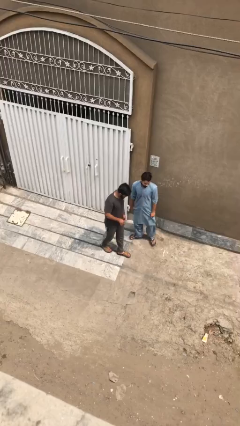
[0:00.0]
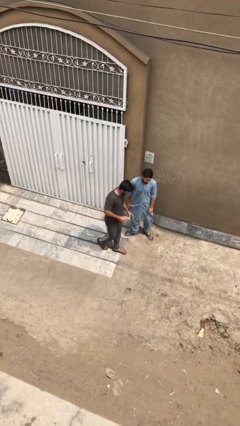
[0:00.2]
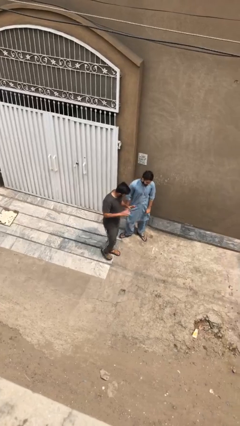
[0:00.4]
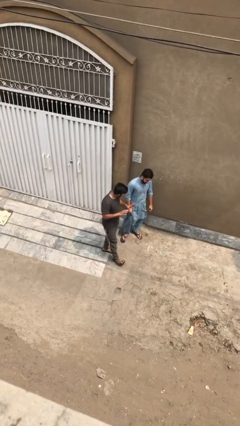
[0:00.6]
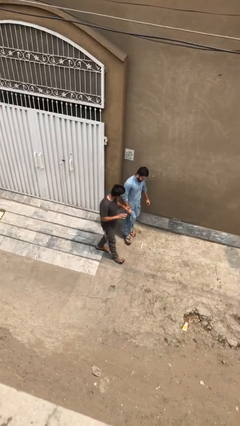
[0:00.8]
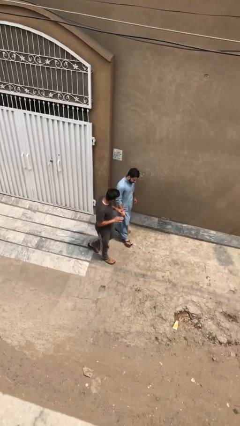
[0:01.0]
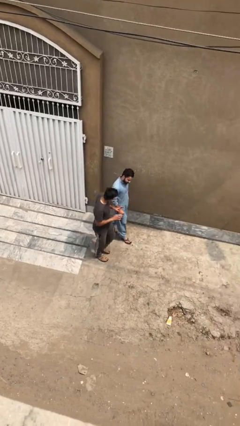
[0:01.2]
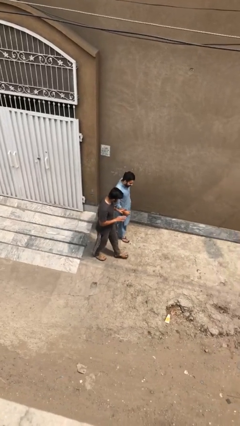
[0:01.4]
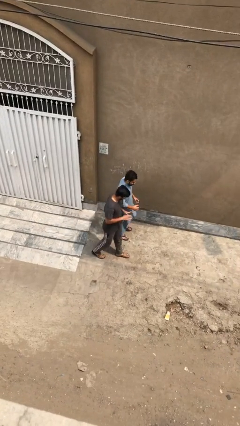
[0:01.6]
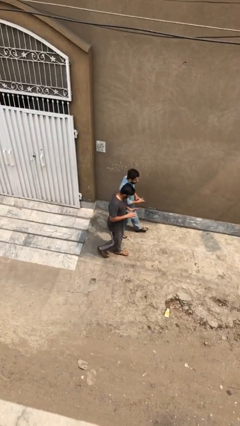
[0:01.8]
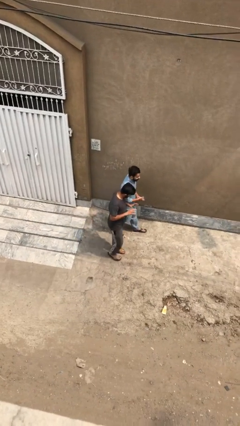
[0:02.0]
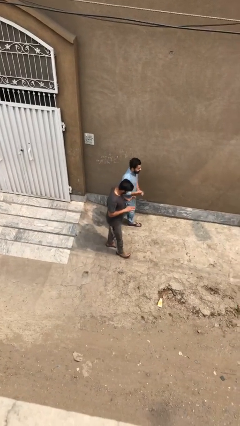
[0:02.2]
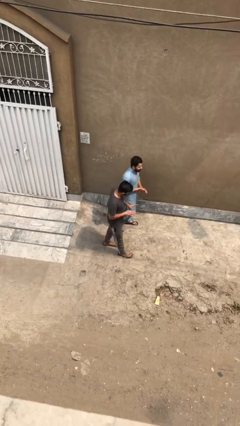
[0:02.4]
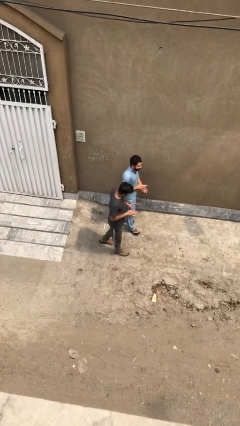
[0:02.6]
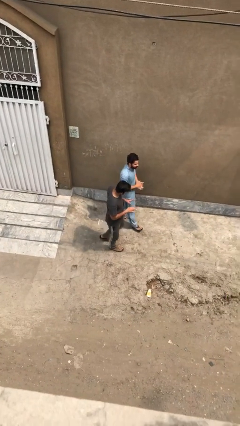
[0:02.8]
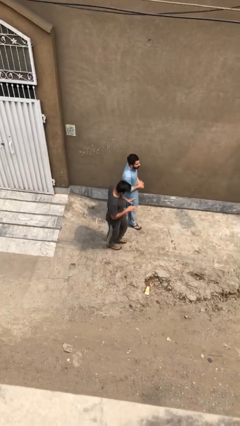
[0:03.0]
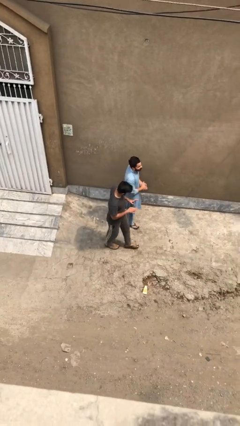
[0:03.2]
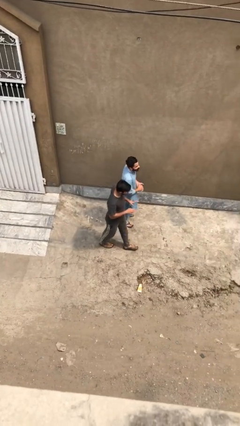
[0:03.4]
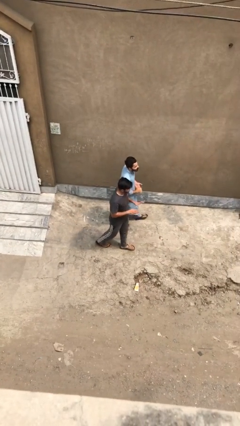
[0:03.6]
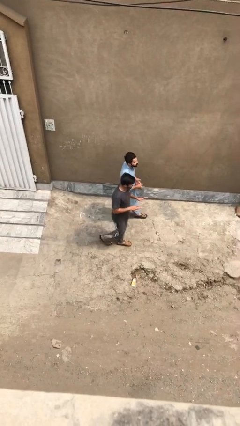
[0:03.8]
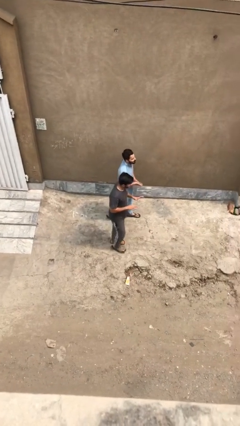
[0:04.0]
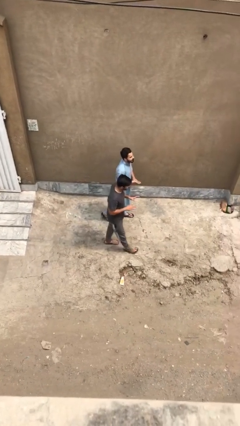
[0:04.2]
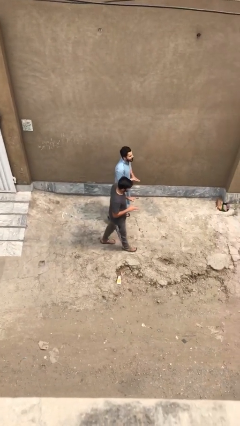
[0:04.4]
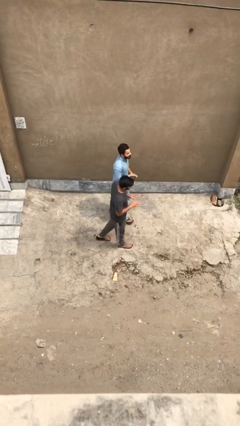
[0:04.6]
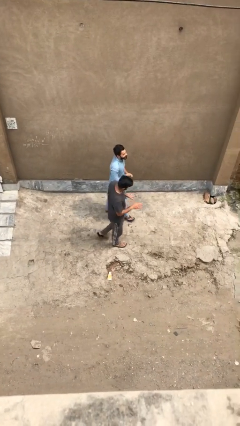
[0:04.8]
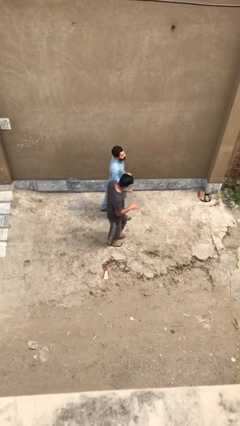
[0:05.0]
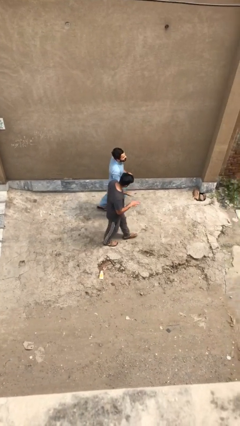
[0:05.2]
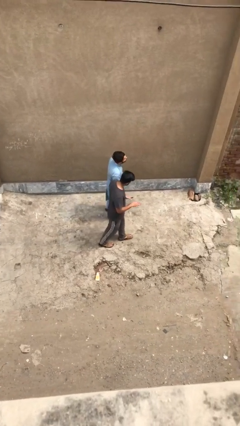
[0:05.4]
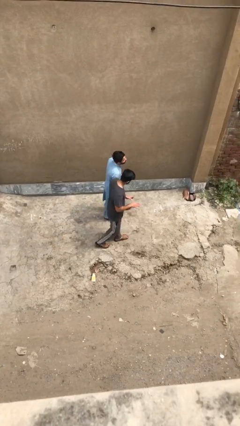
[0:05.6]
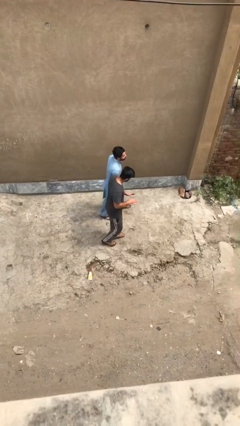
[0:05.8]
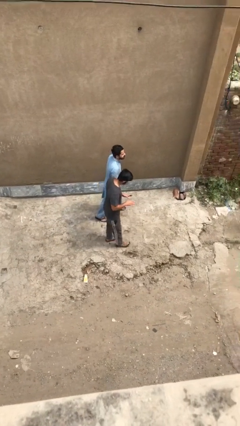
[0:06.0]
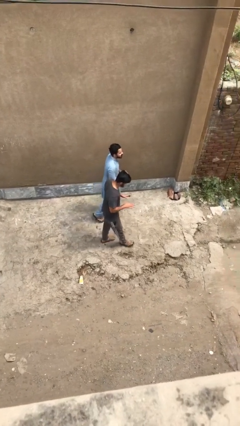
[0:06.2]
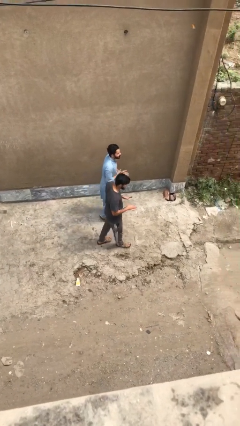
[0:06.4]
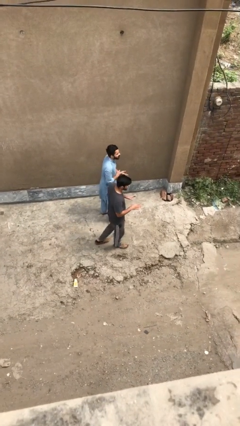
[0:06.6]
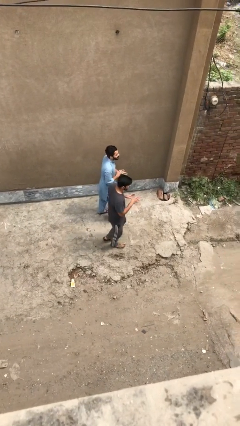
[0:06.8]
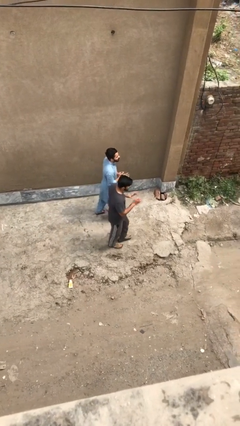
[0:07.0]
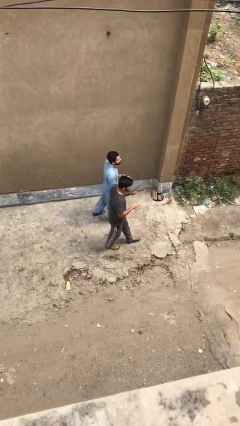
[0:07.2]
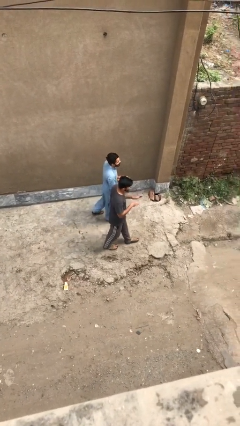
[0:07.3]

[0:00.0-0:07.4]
person talks to person

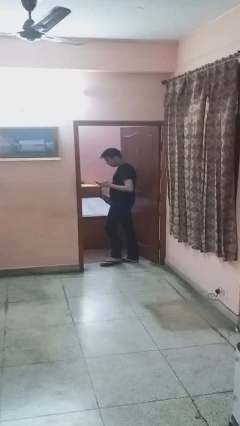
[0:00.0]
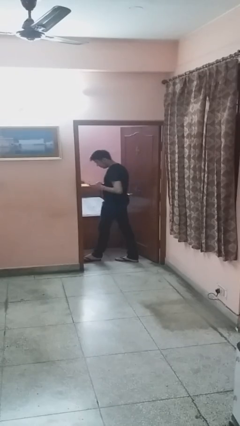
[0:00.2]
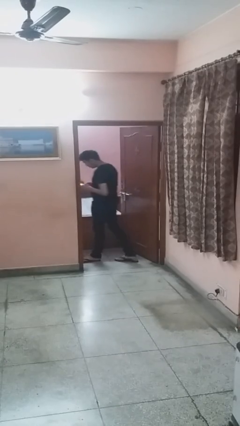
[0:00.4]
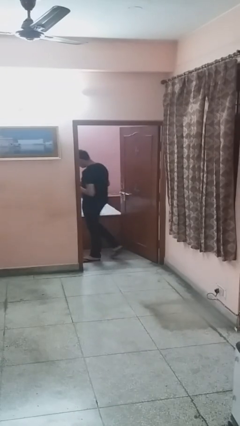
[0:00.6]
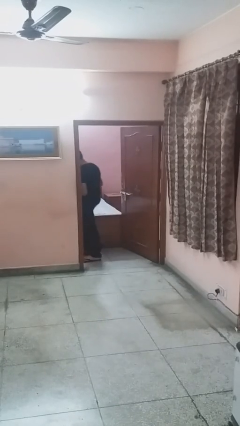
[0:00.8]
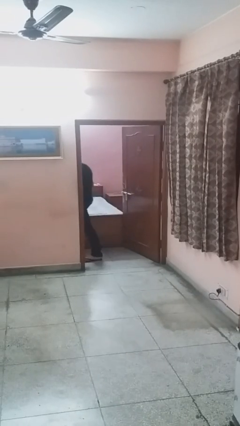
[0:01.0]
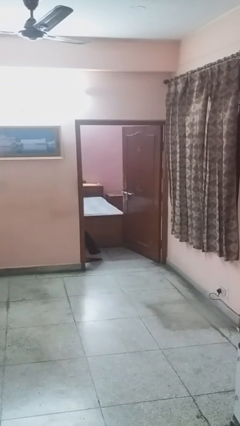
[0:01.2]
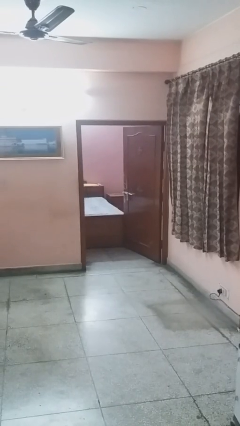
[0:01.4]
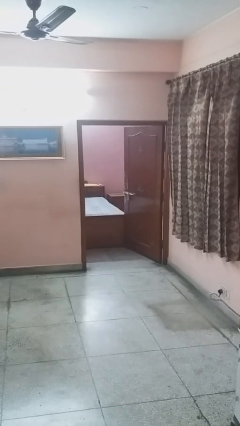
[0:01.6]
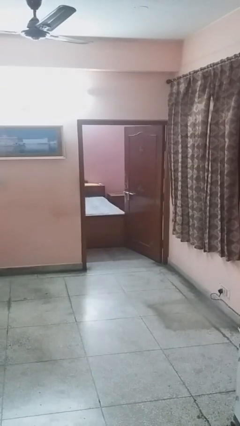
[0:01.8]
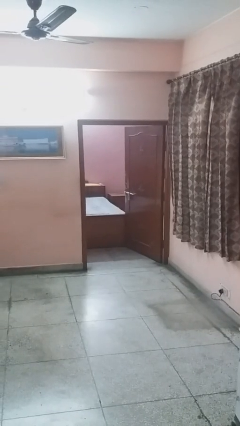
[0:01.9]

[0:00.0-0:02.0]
person exits scene through structure

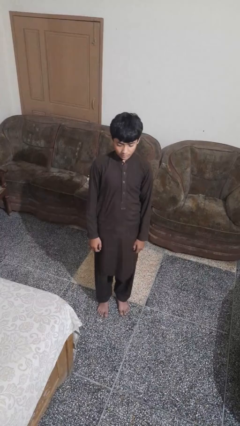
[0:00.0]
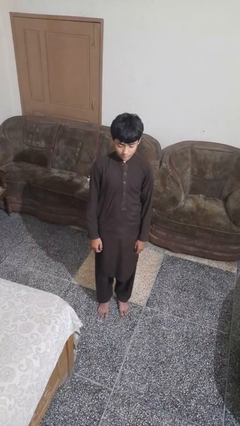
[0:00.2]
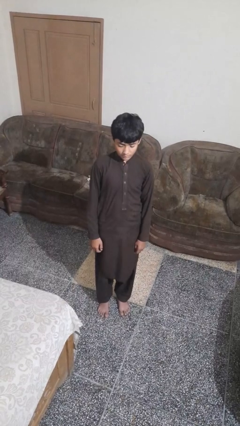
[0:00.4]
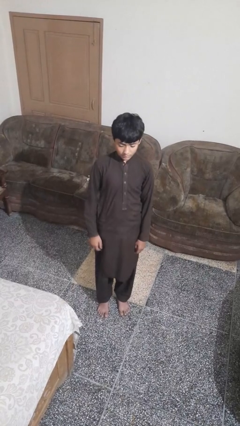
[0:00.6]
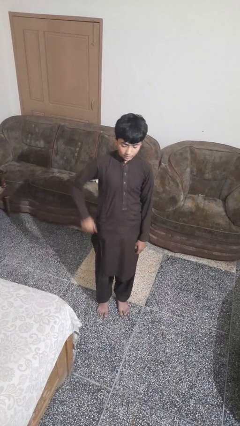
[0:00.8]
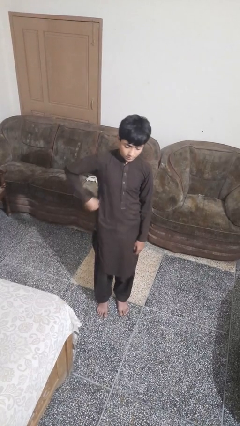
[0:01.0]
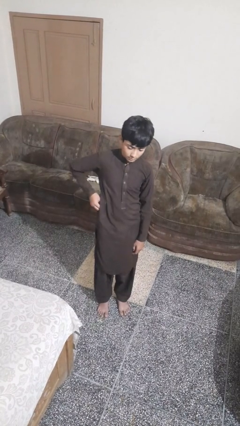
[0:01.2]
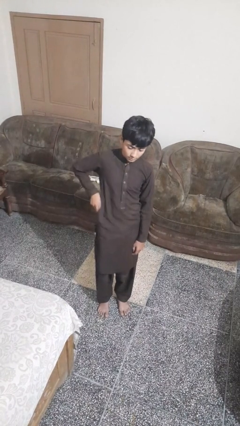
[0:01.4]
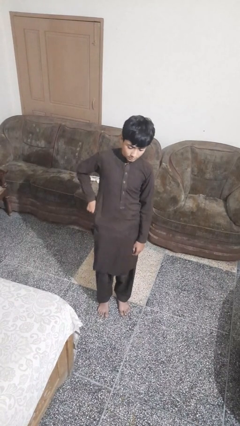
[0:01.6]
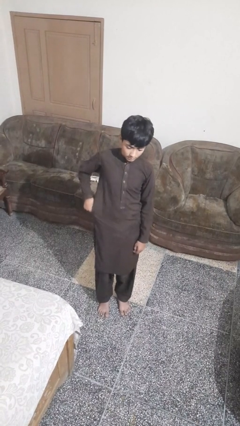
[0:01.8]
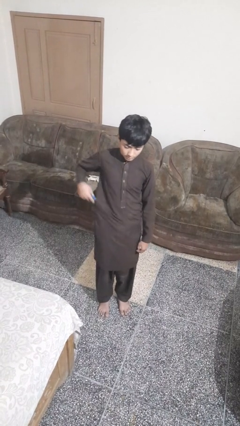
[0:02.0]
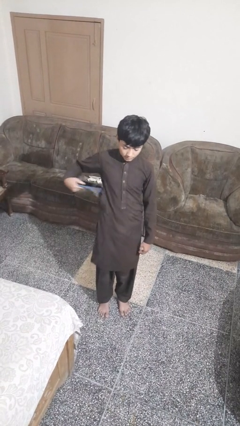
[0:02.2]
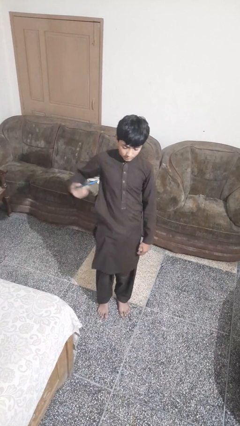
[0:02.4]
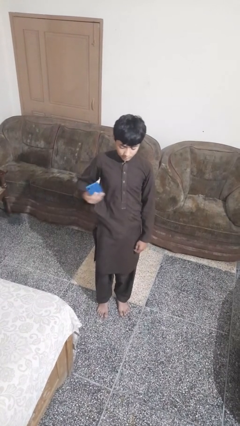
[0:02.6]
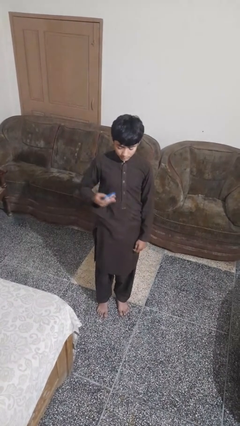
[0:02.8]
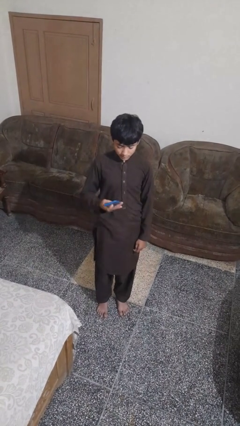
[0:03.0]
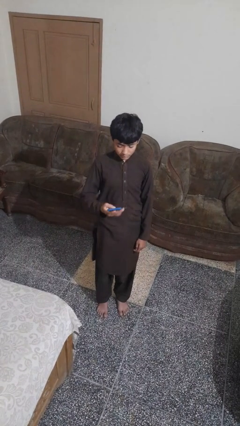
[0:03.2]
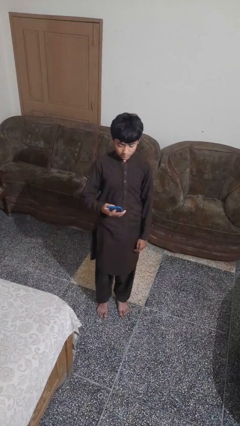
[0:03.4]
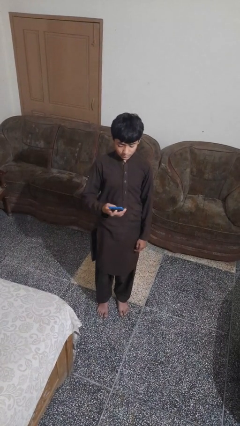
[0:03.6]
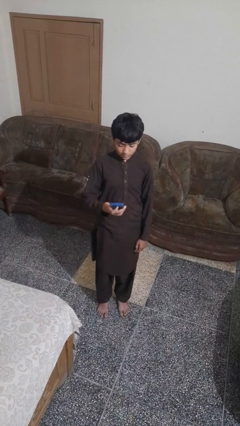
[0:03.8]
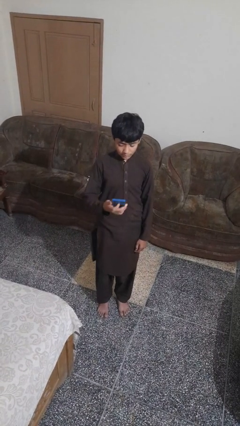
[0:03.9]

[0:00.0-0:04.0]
person takes phone from pocket

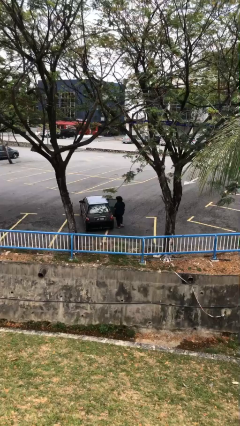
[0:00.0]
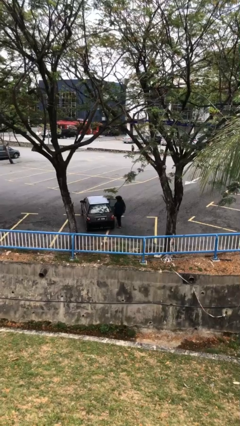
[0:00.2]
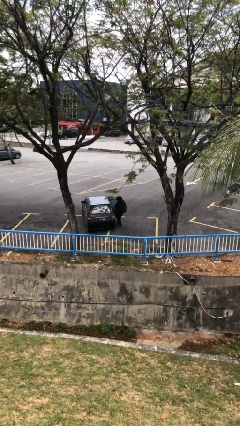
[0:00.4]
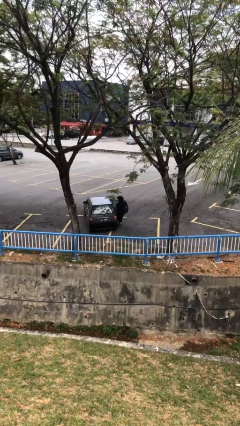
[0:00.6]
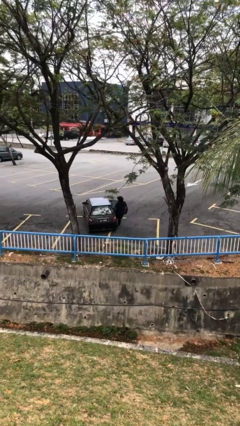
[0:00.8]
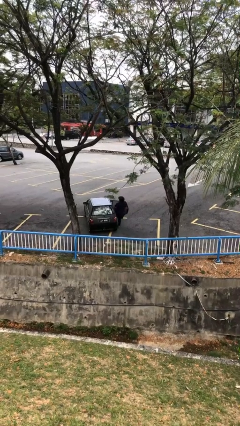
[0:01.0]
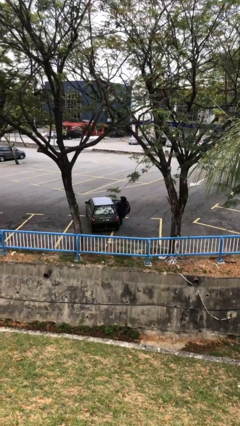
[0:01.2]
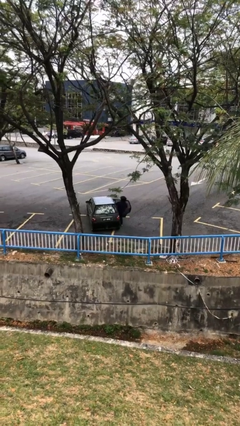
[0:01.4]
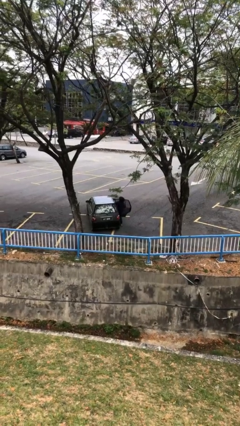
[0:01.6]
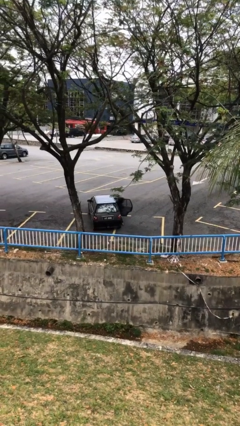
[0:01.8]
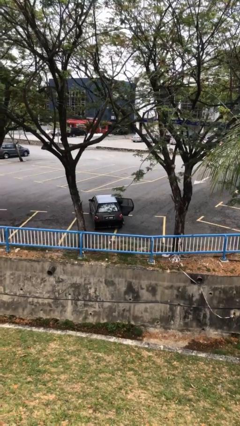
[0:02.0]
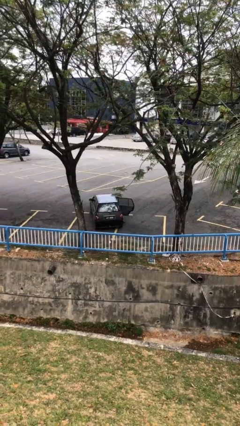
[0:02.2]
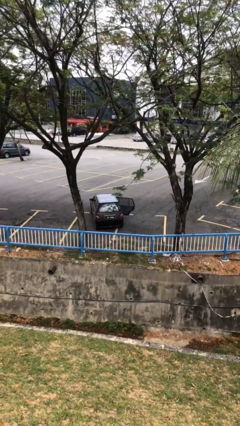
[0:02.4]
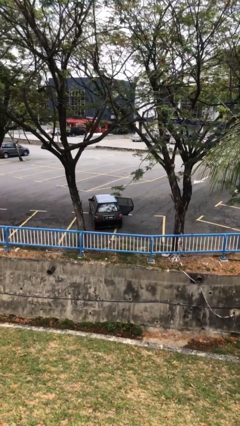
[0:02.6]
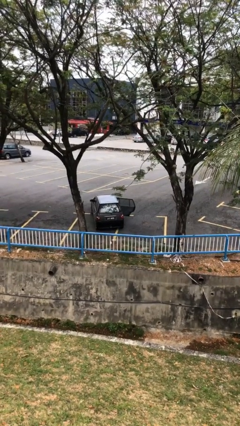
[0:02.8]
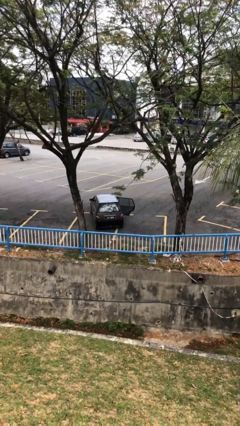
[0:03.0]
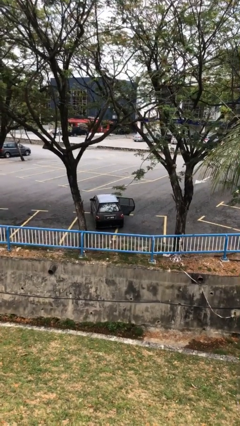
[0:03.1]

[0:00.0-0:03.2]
person enters car

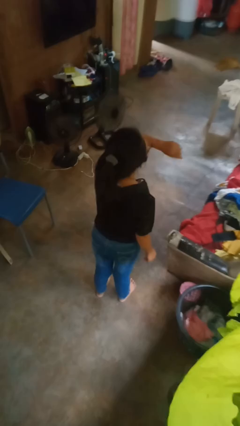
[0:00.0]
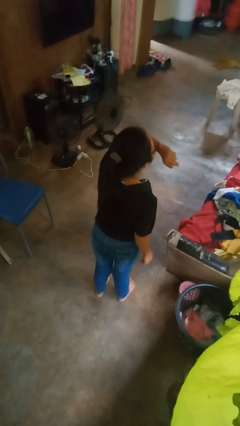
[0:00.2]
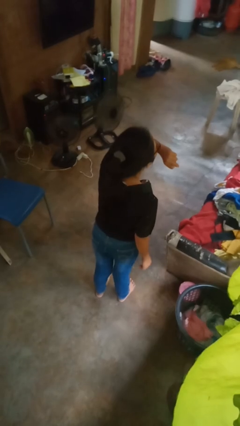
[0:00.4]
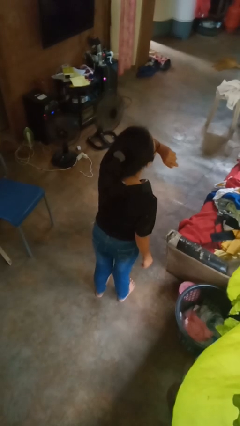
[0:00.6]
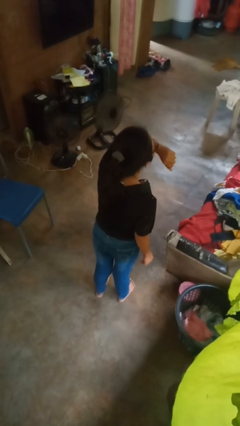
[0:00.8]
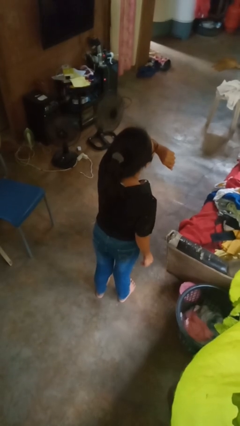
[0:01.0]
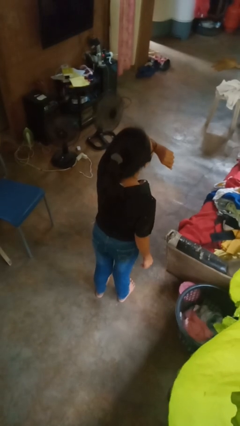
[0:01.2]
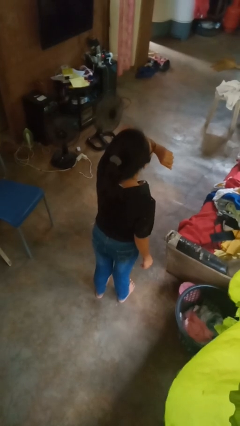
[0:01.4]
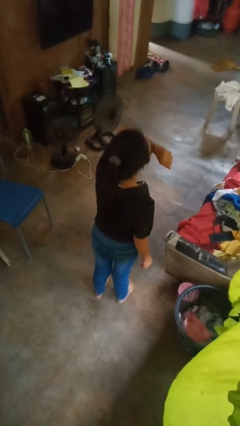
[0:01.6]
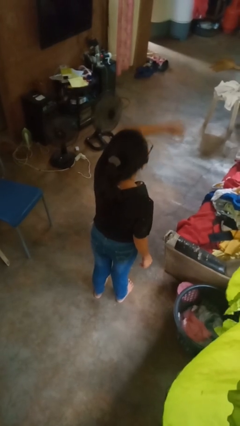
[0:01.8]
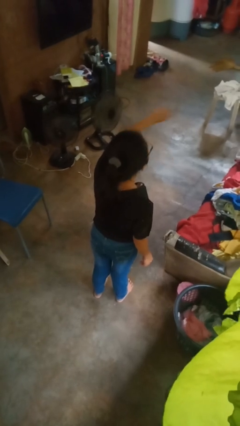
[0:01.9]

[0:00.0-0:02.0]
person sneezes into arm
